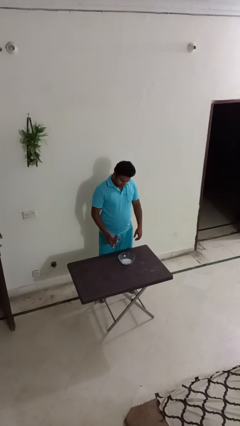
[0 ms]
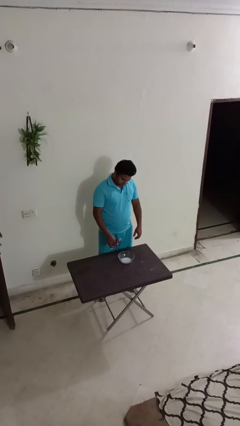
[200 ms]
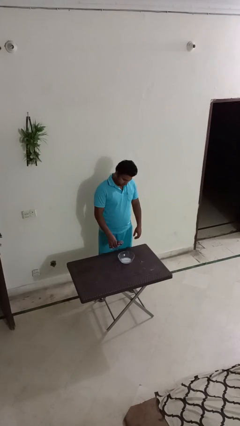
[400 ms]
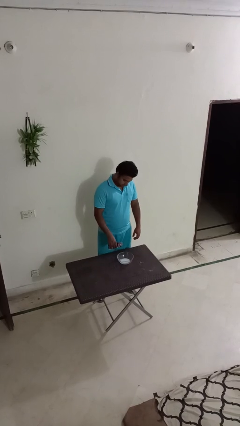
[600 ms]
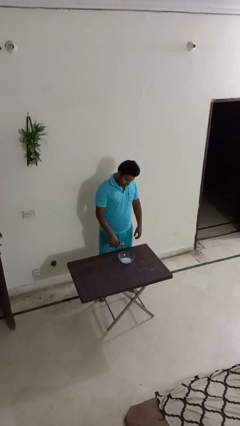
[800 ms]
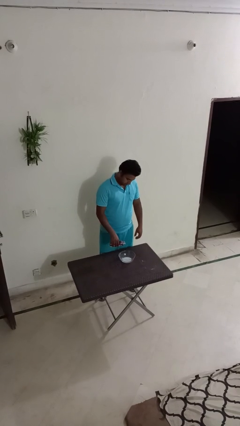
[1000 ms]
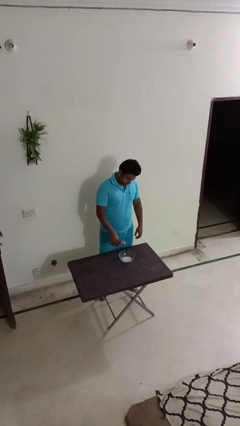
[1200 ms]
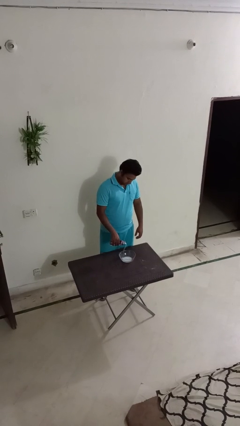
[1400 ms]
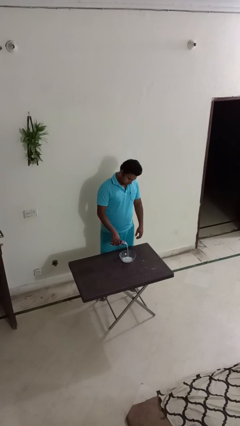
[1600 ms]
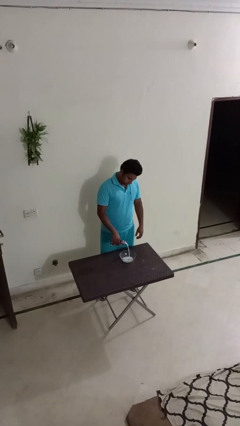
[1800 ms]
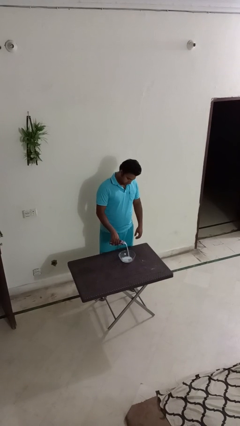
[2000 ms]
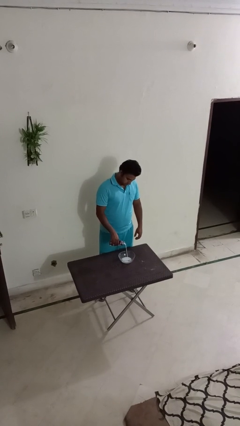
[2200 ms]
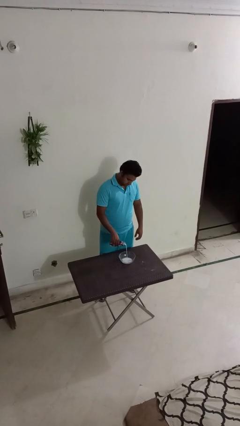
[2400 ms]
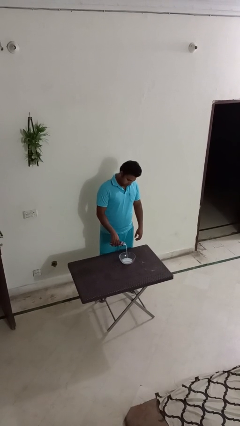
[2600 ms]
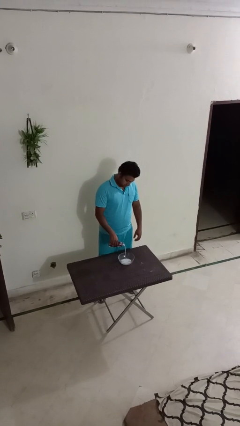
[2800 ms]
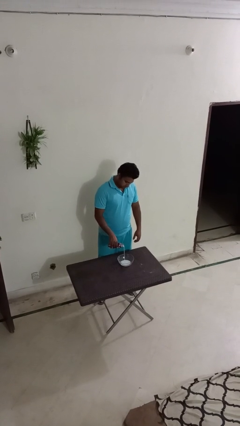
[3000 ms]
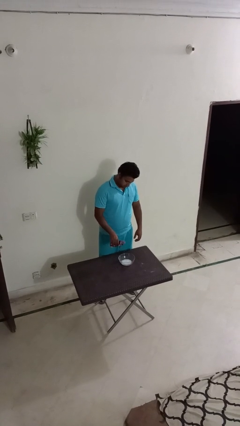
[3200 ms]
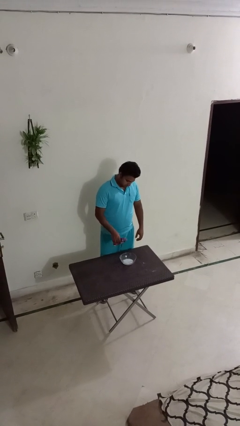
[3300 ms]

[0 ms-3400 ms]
person pours into bowl

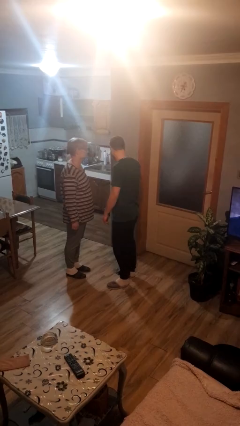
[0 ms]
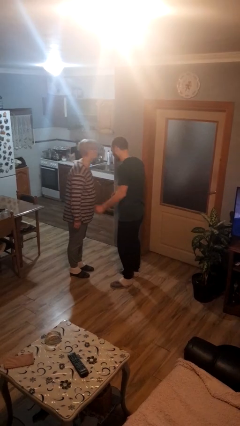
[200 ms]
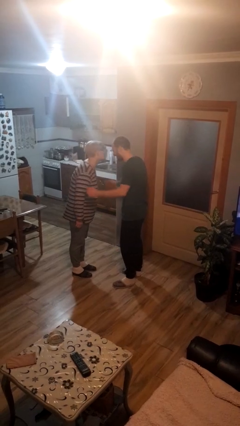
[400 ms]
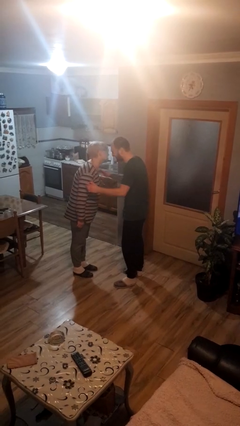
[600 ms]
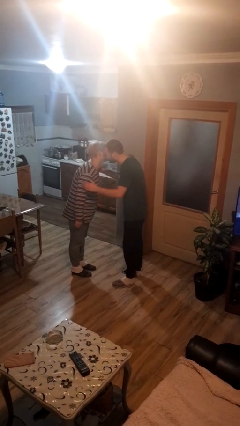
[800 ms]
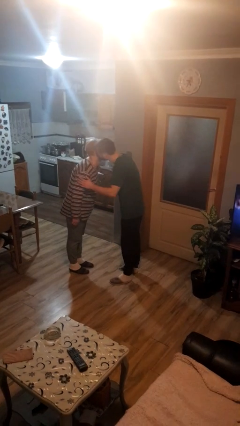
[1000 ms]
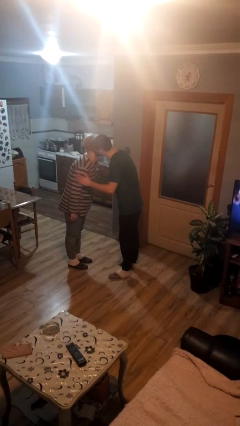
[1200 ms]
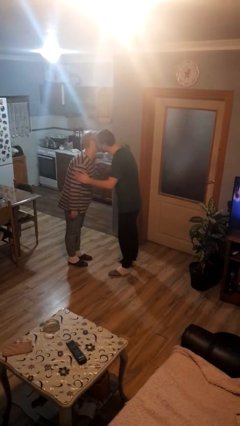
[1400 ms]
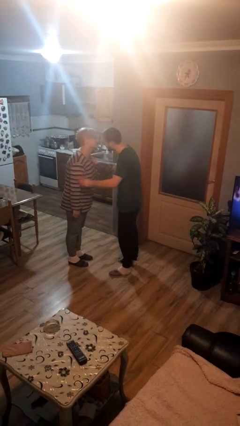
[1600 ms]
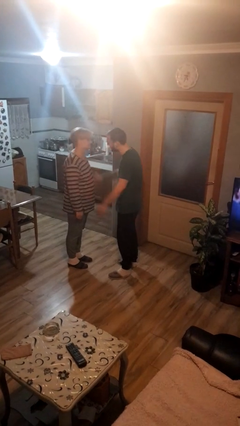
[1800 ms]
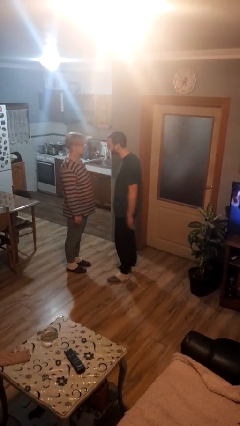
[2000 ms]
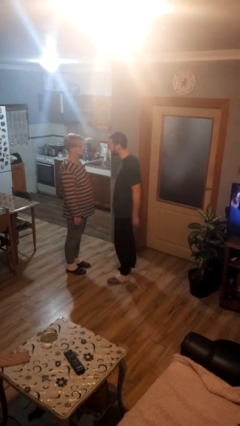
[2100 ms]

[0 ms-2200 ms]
person kisses cheek of person

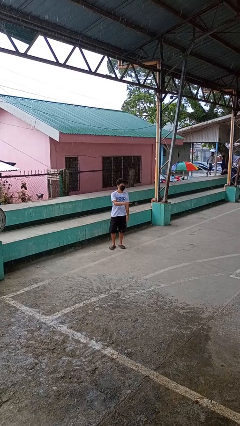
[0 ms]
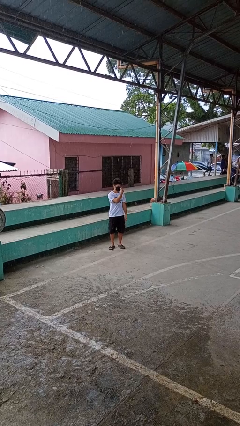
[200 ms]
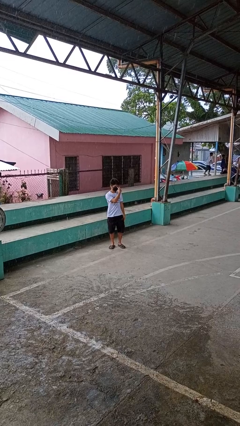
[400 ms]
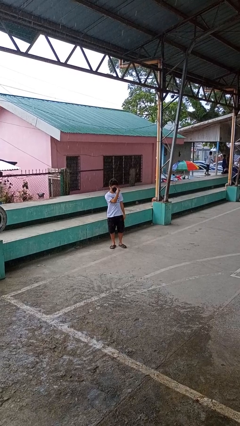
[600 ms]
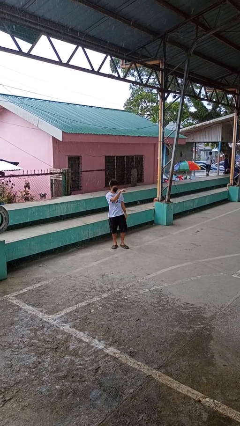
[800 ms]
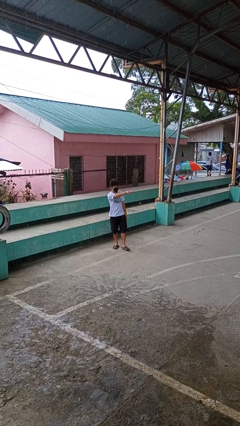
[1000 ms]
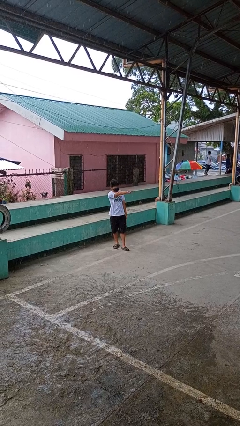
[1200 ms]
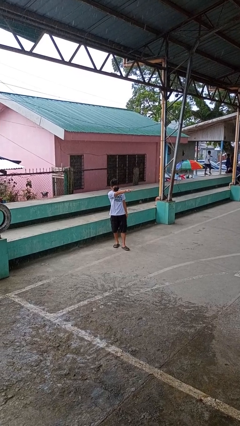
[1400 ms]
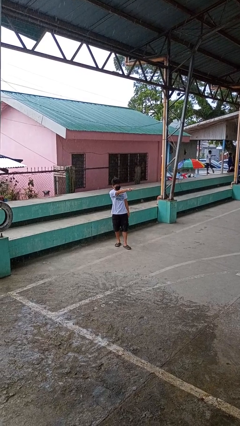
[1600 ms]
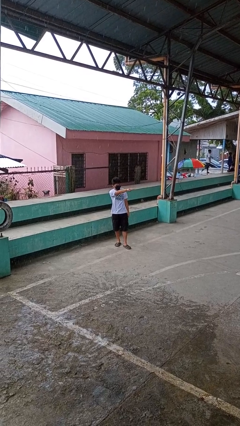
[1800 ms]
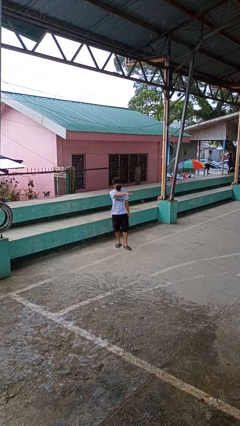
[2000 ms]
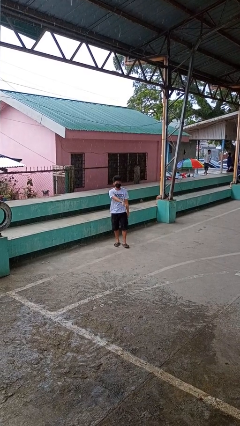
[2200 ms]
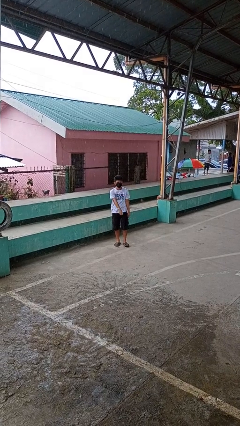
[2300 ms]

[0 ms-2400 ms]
person gestures watch closely

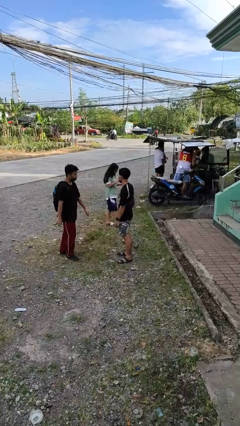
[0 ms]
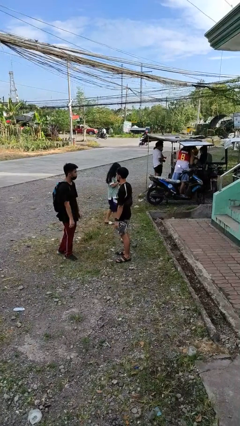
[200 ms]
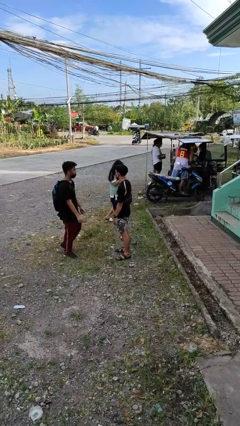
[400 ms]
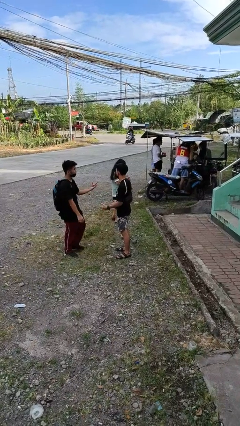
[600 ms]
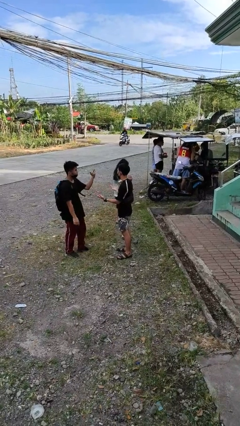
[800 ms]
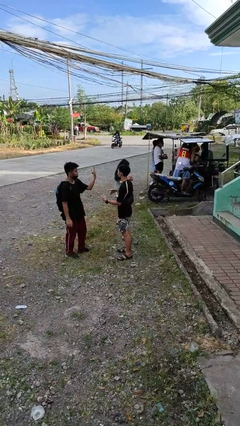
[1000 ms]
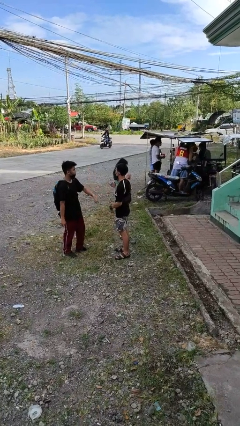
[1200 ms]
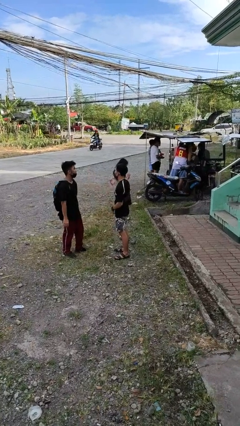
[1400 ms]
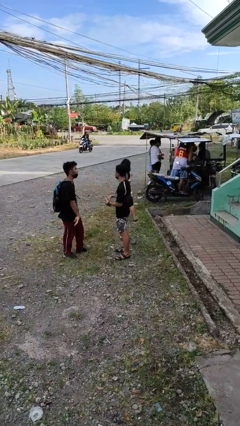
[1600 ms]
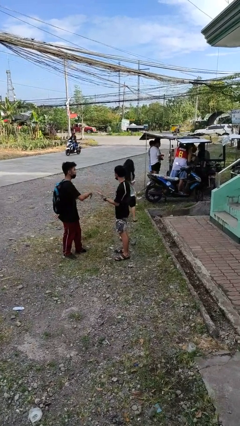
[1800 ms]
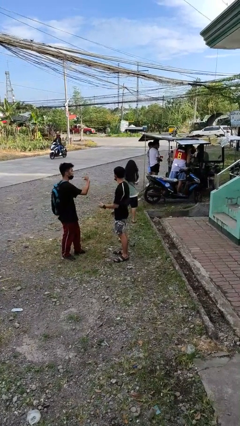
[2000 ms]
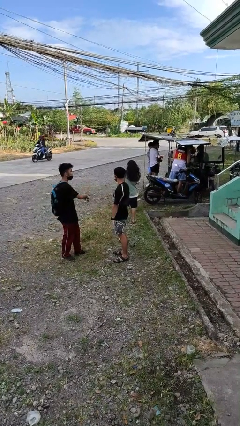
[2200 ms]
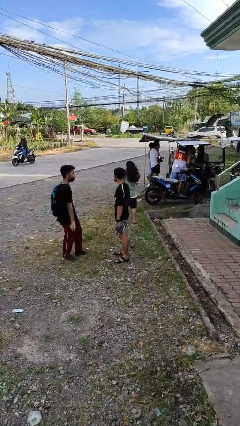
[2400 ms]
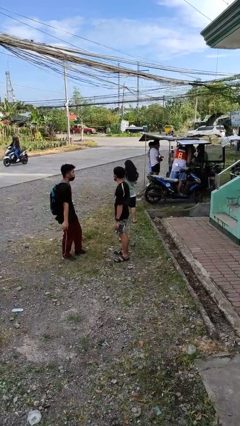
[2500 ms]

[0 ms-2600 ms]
person talks to person

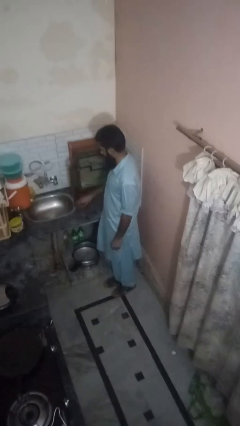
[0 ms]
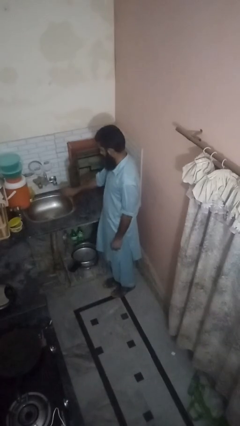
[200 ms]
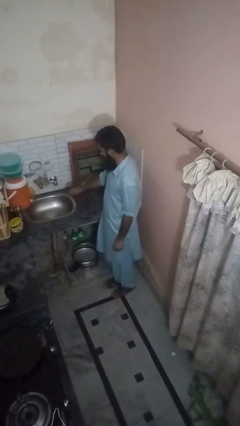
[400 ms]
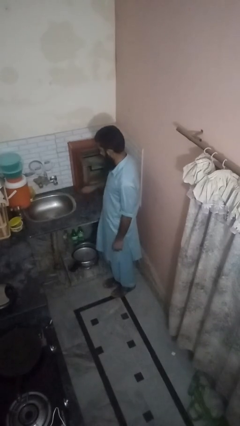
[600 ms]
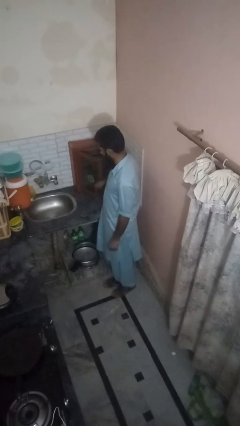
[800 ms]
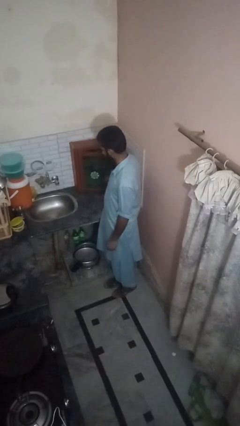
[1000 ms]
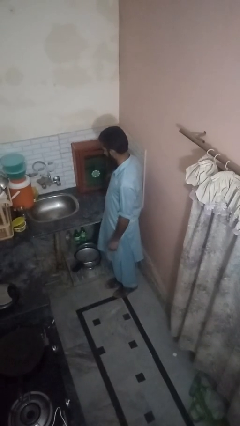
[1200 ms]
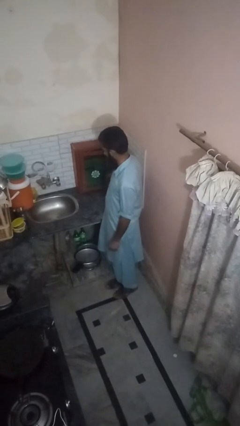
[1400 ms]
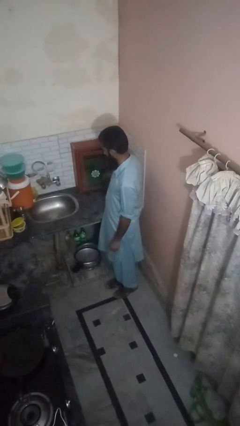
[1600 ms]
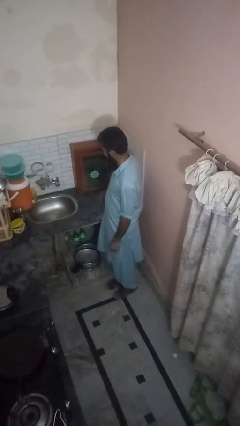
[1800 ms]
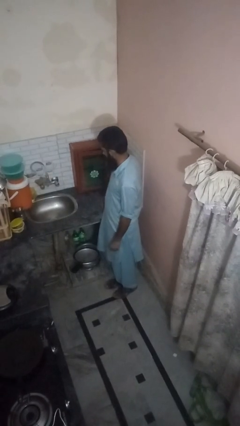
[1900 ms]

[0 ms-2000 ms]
person closes kitchen drawer

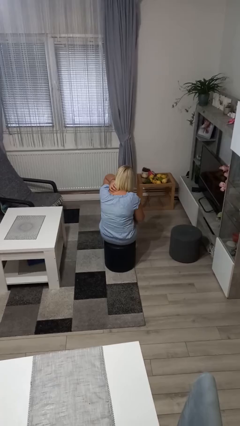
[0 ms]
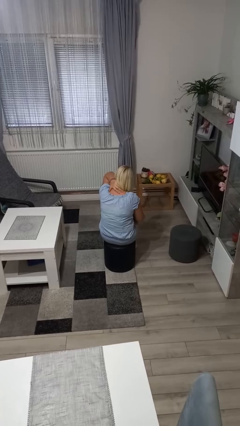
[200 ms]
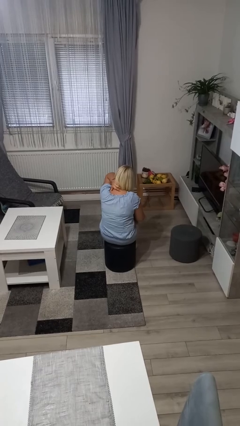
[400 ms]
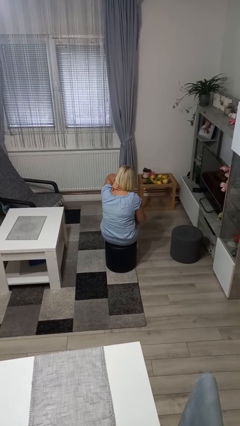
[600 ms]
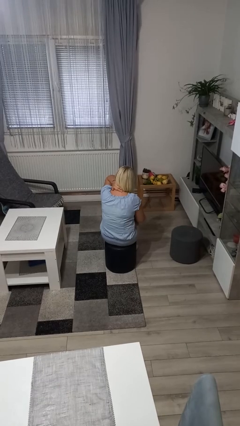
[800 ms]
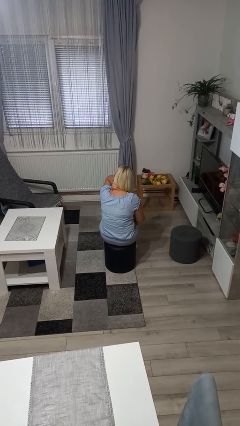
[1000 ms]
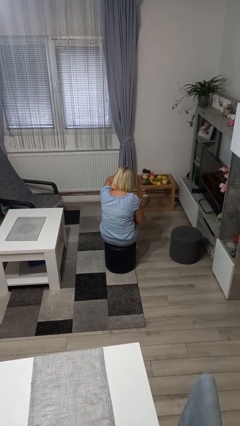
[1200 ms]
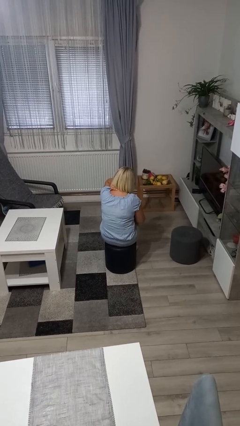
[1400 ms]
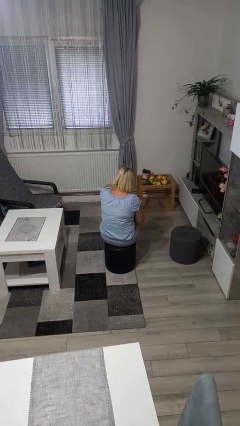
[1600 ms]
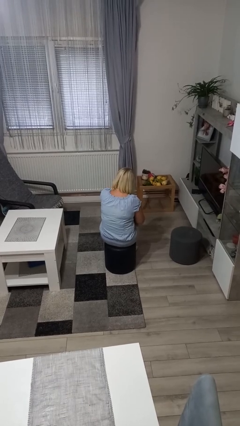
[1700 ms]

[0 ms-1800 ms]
person rubs neck

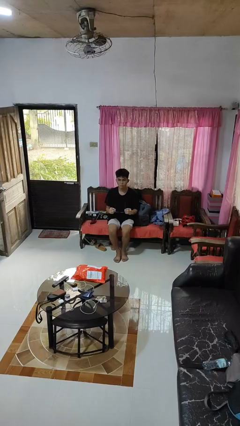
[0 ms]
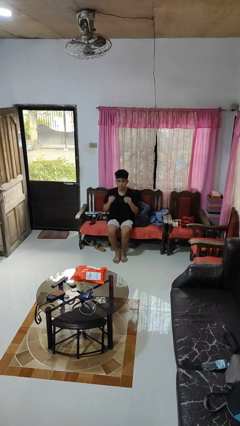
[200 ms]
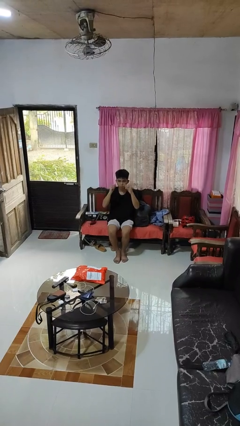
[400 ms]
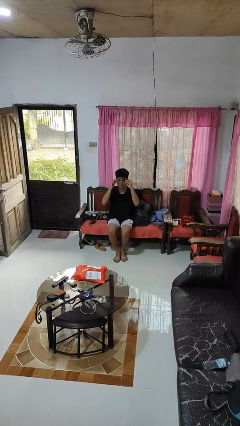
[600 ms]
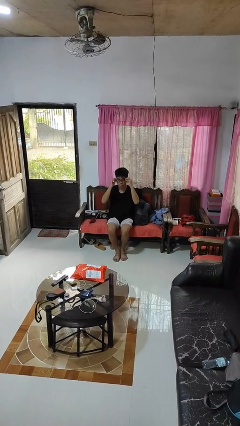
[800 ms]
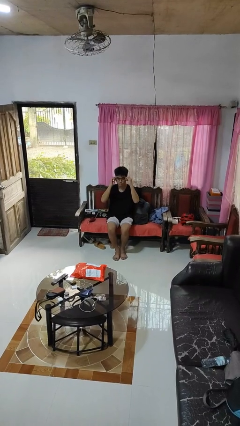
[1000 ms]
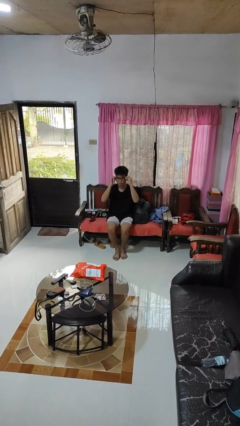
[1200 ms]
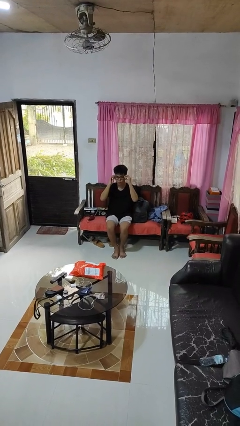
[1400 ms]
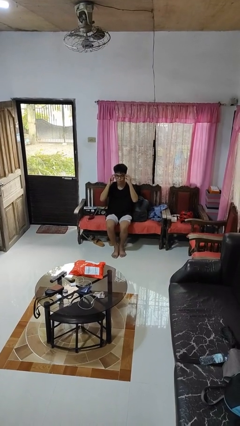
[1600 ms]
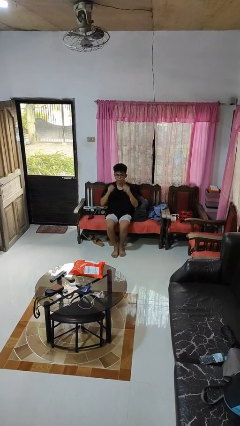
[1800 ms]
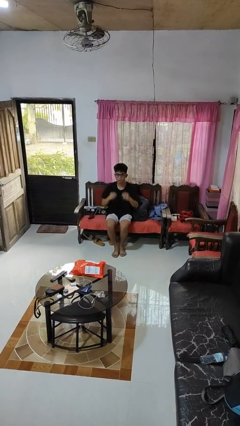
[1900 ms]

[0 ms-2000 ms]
person puts on glasses

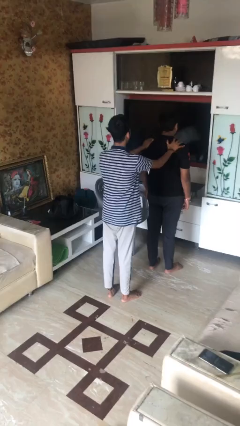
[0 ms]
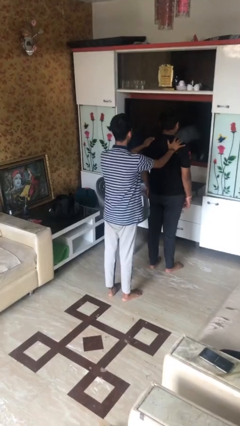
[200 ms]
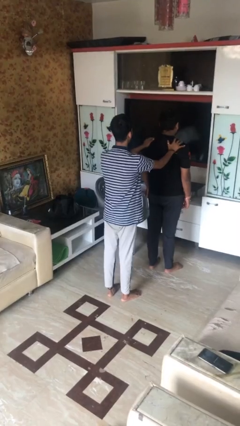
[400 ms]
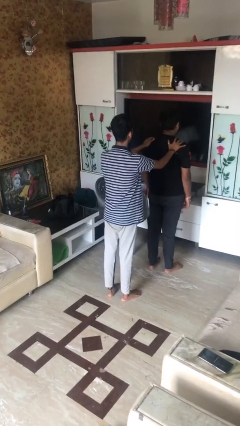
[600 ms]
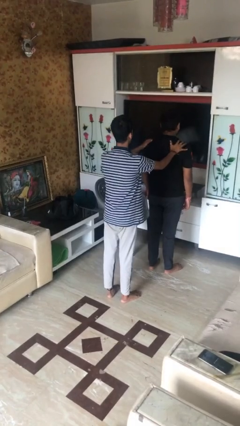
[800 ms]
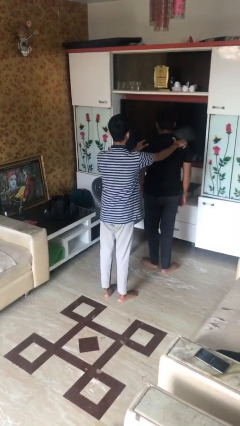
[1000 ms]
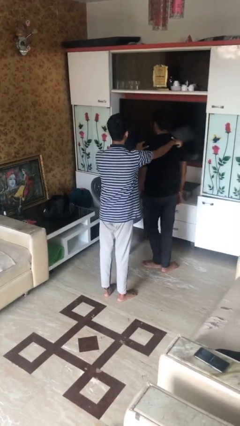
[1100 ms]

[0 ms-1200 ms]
person grabs person by shoulder
